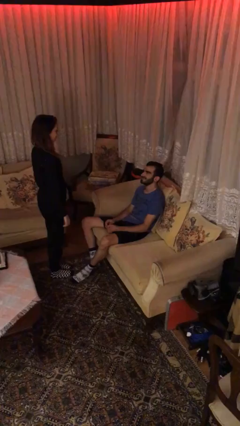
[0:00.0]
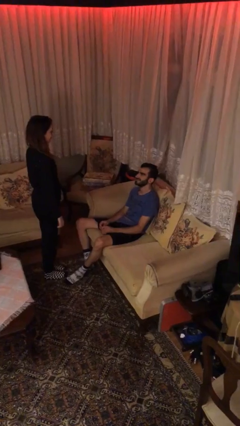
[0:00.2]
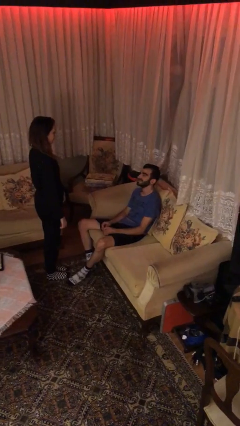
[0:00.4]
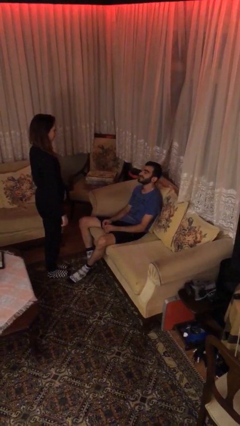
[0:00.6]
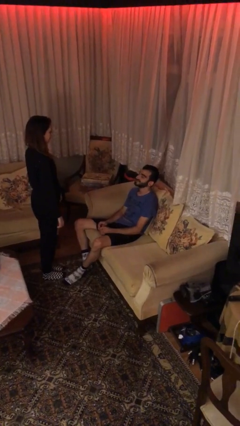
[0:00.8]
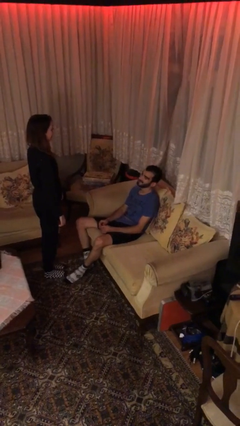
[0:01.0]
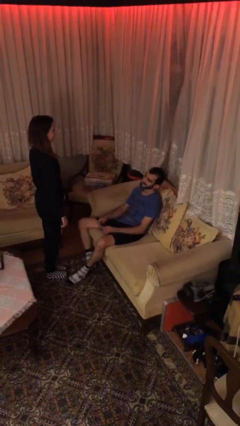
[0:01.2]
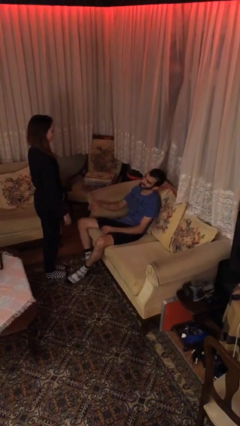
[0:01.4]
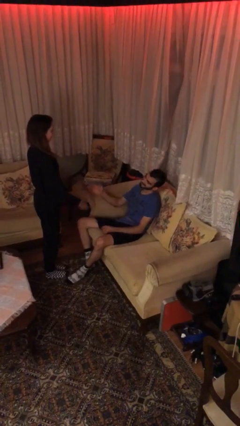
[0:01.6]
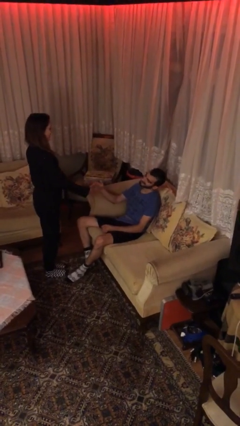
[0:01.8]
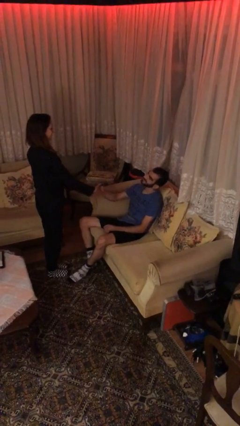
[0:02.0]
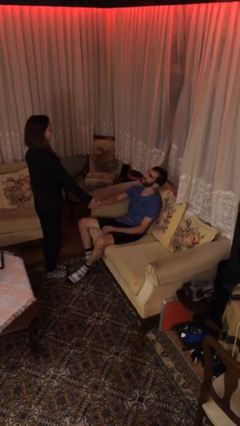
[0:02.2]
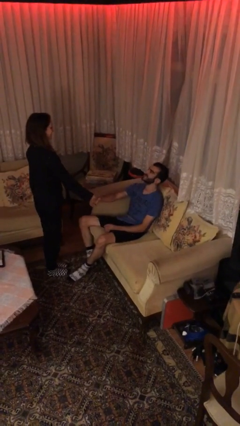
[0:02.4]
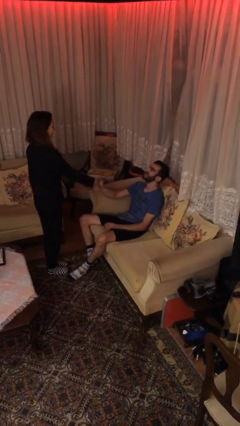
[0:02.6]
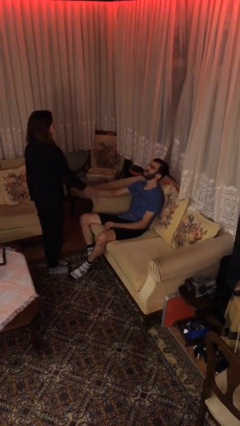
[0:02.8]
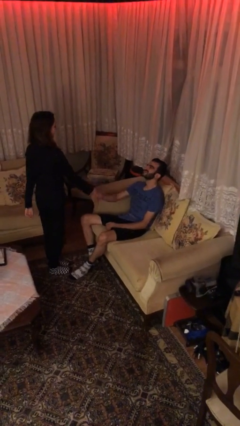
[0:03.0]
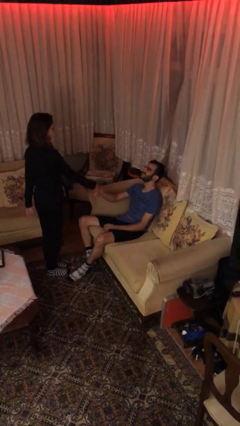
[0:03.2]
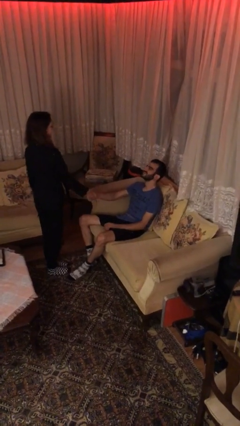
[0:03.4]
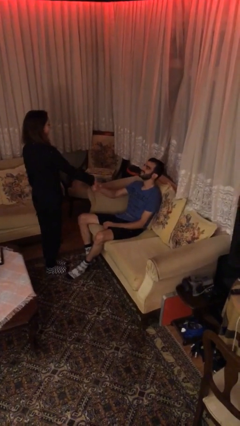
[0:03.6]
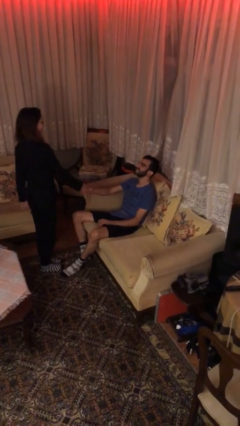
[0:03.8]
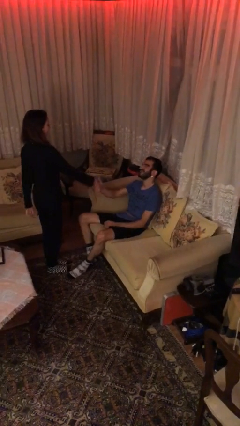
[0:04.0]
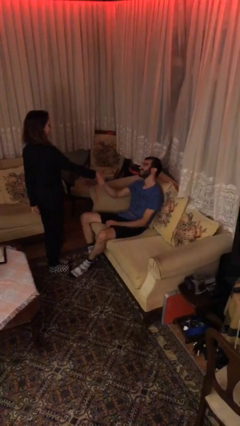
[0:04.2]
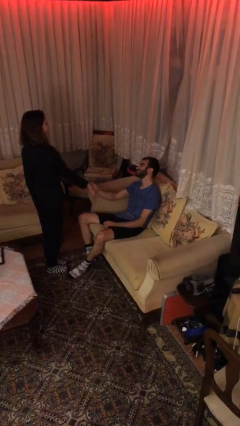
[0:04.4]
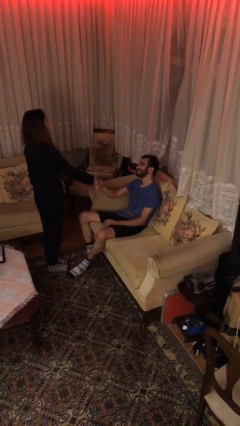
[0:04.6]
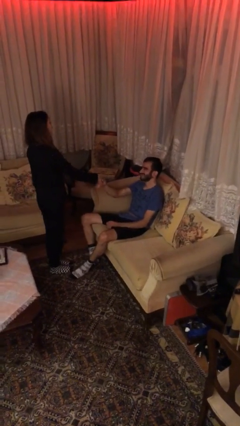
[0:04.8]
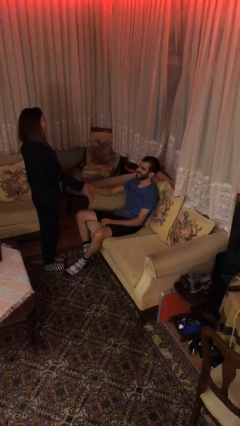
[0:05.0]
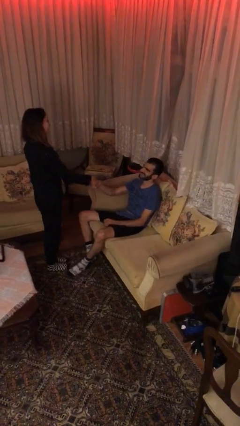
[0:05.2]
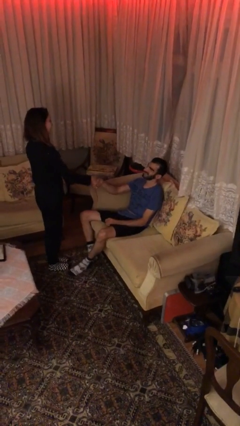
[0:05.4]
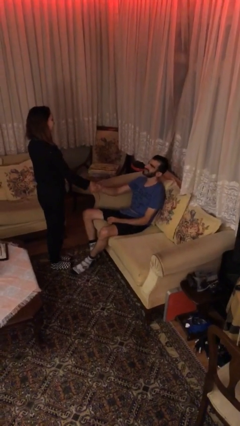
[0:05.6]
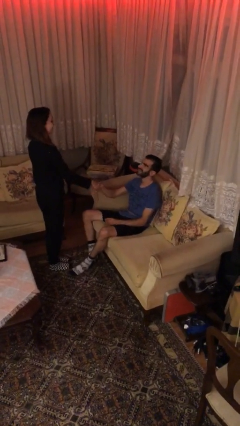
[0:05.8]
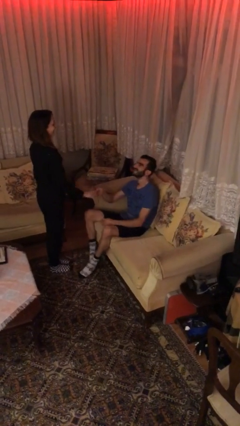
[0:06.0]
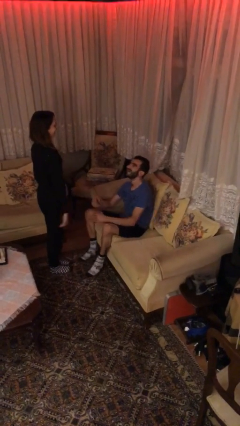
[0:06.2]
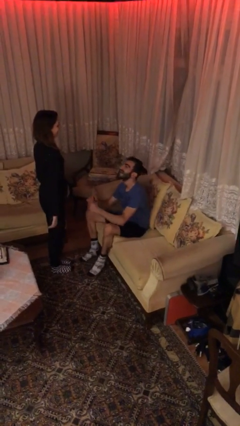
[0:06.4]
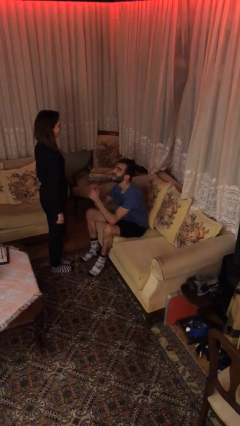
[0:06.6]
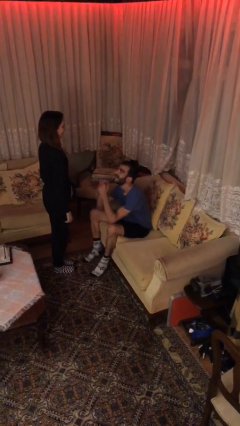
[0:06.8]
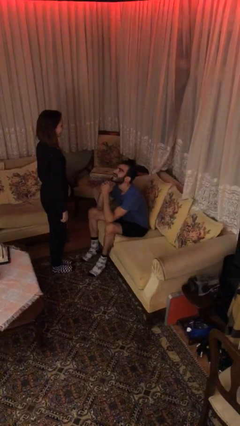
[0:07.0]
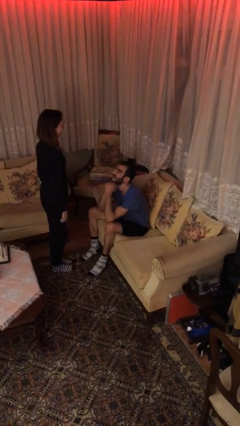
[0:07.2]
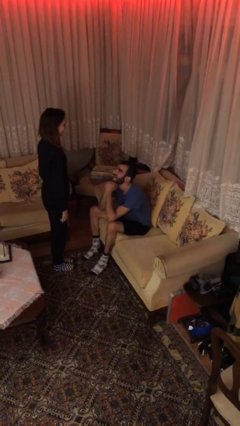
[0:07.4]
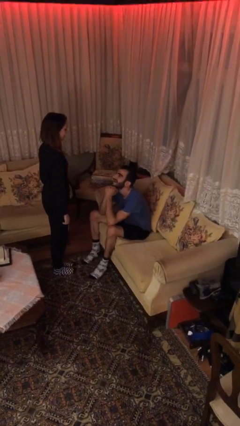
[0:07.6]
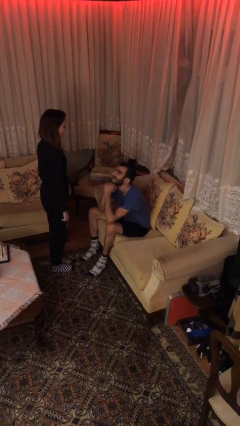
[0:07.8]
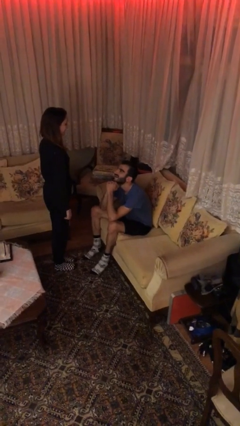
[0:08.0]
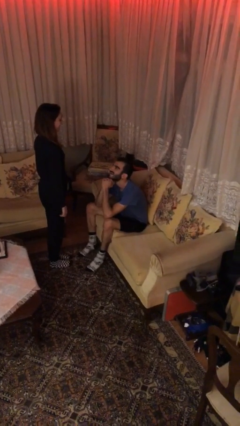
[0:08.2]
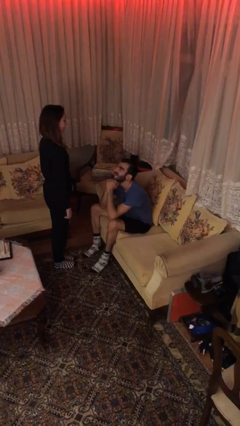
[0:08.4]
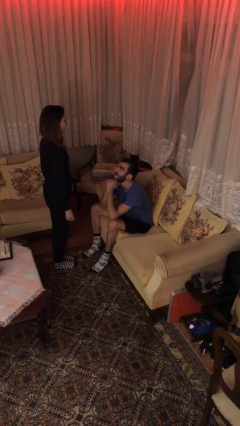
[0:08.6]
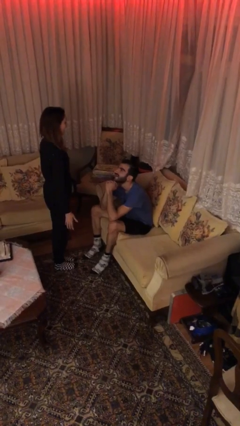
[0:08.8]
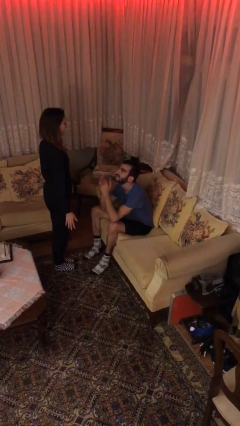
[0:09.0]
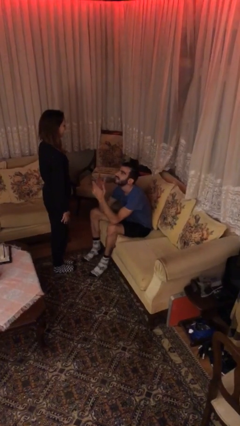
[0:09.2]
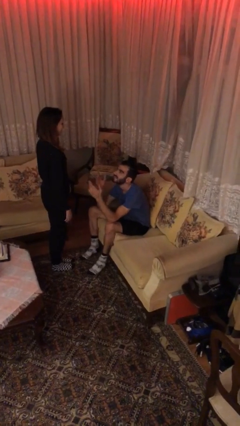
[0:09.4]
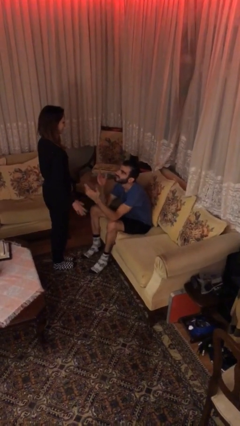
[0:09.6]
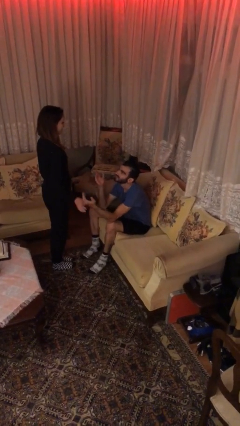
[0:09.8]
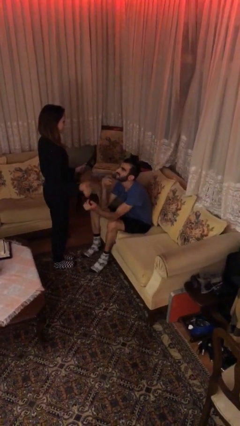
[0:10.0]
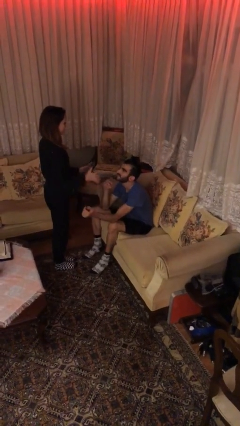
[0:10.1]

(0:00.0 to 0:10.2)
person shakes hand

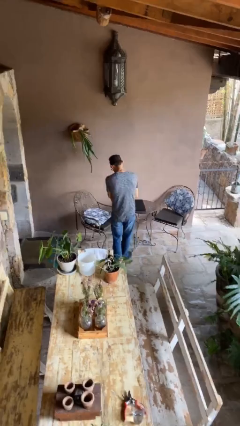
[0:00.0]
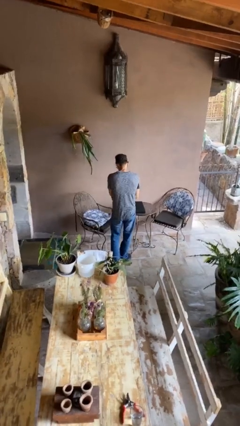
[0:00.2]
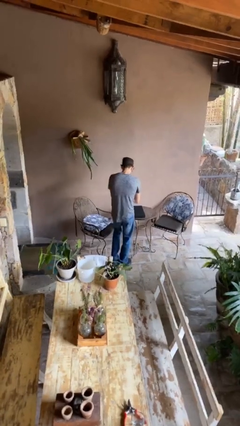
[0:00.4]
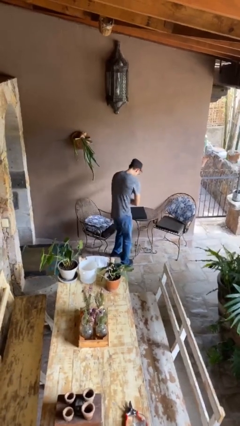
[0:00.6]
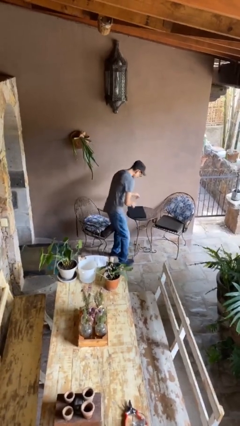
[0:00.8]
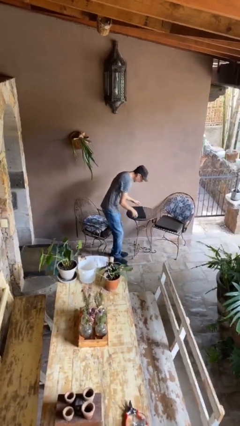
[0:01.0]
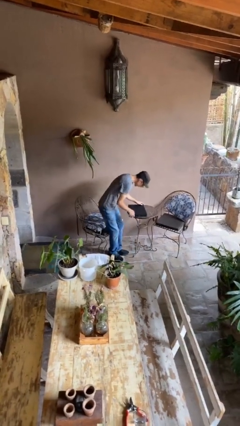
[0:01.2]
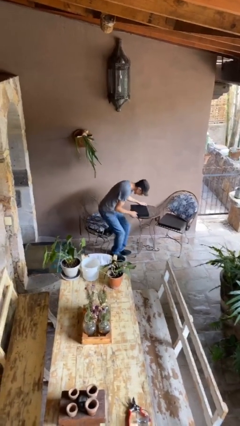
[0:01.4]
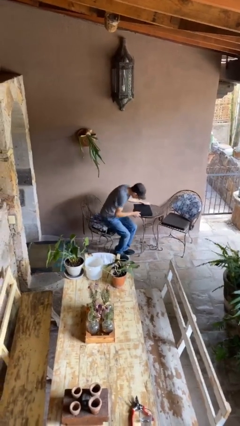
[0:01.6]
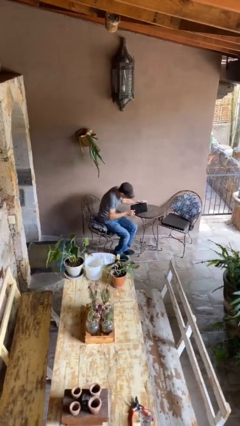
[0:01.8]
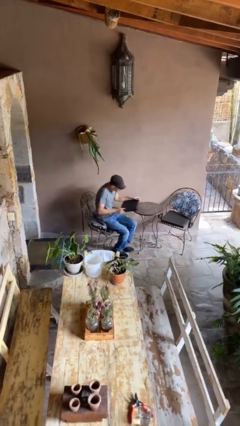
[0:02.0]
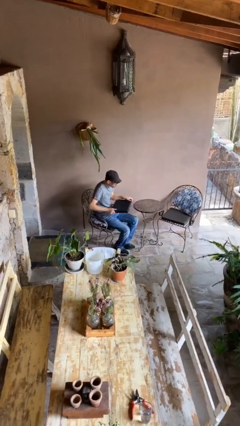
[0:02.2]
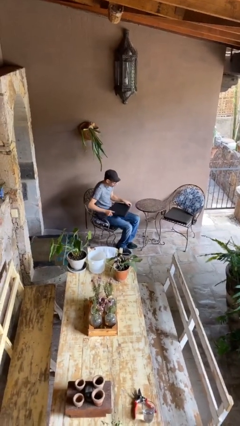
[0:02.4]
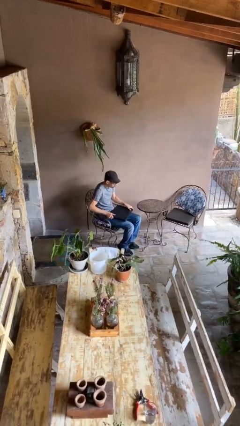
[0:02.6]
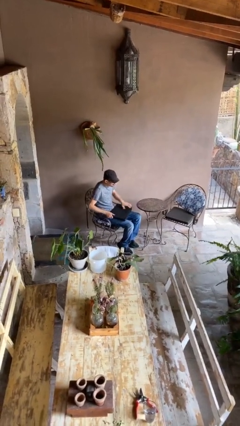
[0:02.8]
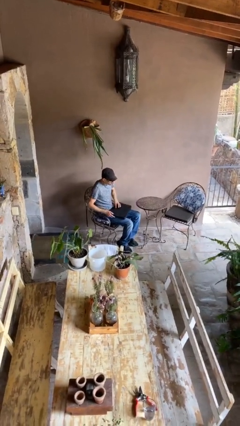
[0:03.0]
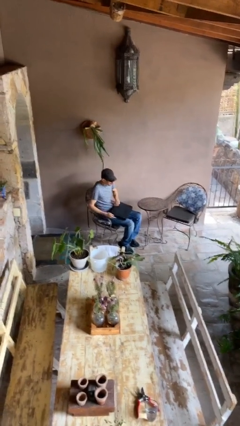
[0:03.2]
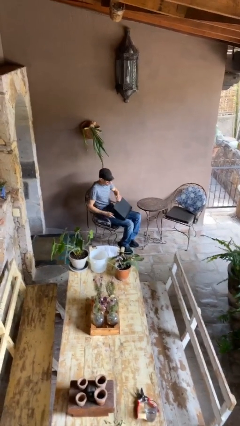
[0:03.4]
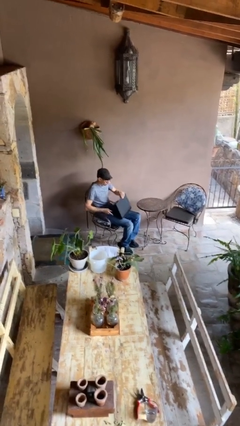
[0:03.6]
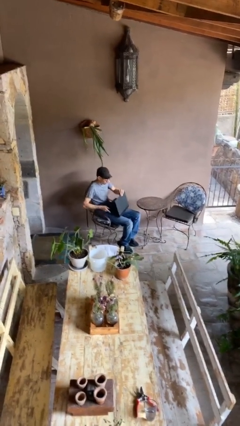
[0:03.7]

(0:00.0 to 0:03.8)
person sits down

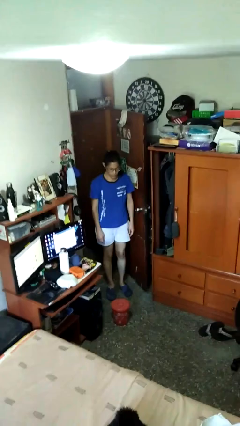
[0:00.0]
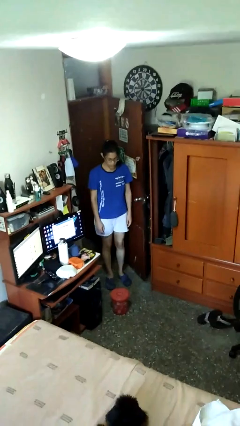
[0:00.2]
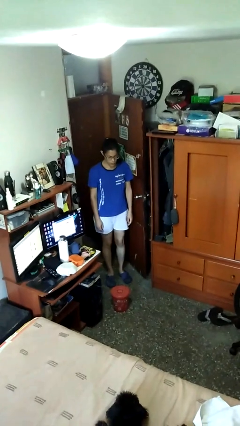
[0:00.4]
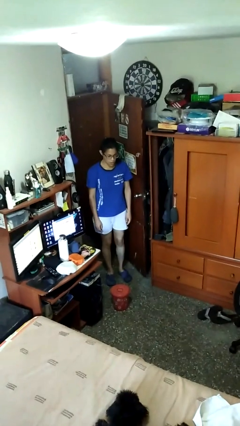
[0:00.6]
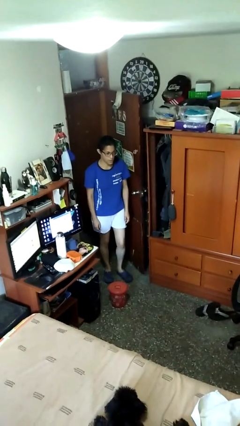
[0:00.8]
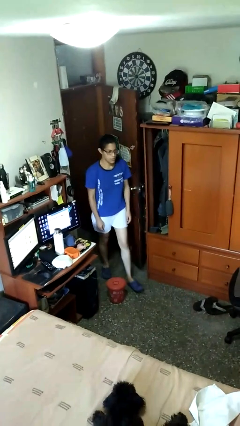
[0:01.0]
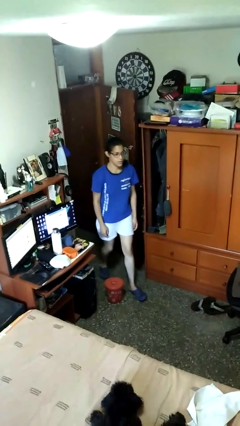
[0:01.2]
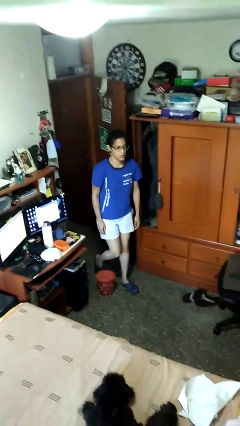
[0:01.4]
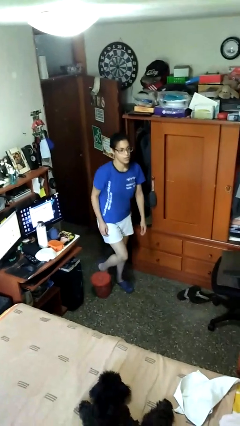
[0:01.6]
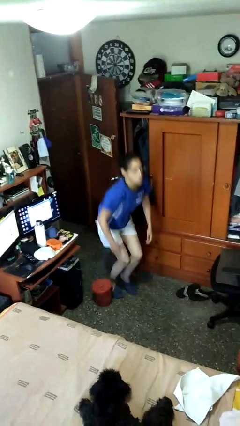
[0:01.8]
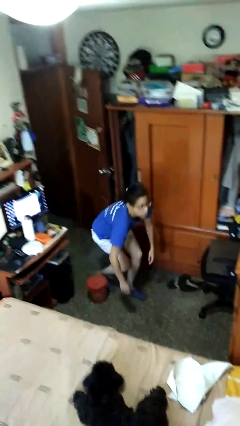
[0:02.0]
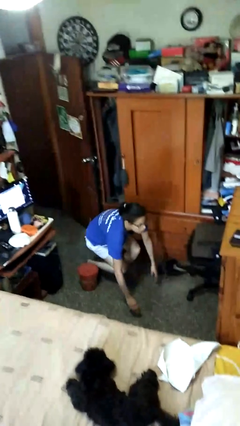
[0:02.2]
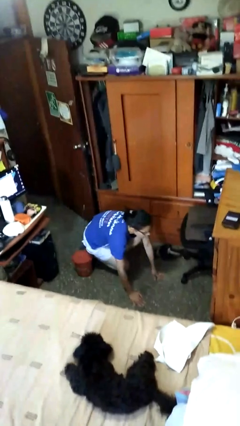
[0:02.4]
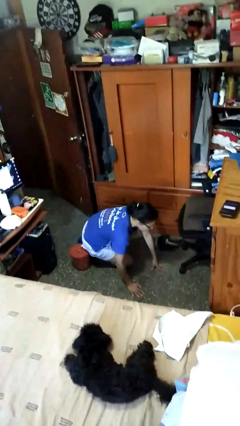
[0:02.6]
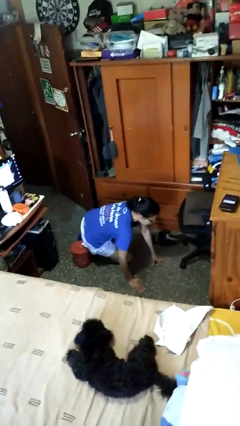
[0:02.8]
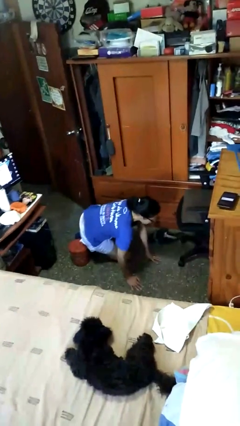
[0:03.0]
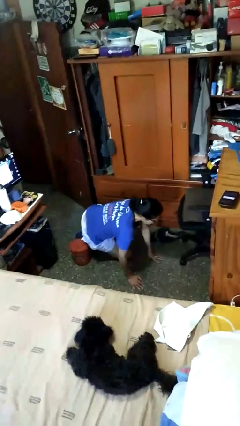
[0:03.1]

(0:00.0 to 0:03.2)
person trips on object on floor

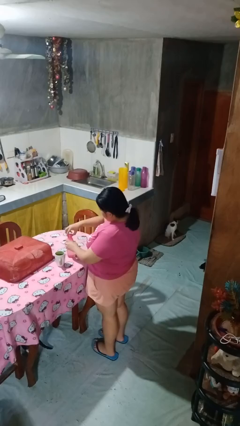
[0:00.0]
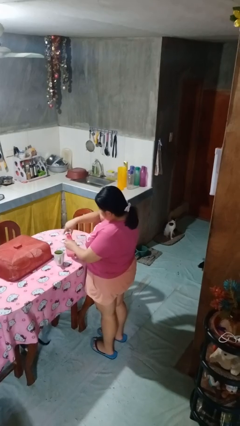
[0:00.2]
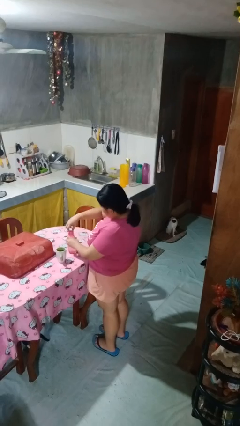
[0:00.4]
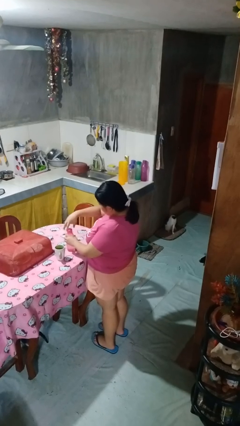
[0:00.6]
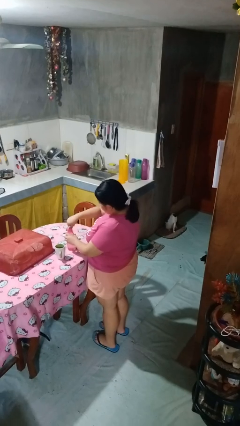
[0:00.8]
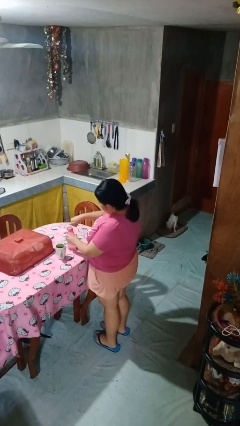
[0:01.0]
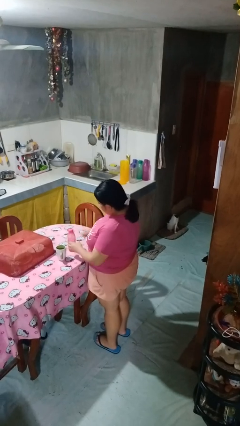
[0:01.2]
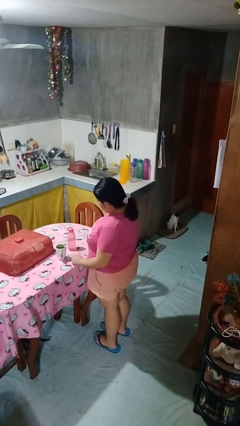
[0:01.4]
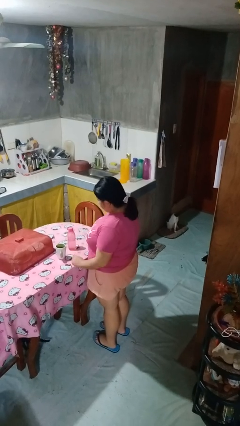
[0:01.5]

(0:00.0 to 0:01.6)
person screws lid to bottle
